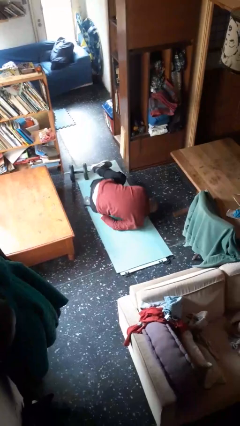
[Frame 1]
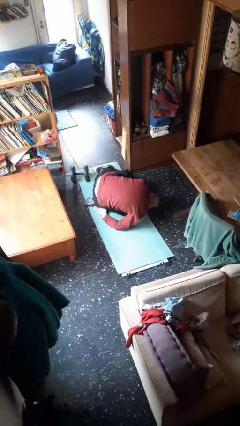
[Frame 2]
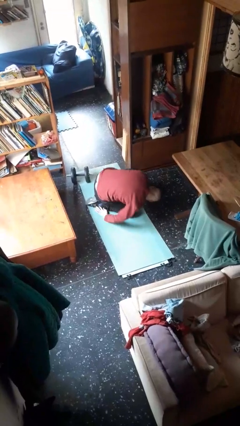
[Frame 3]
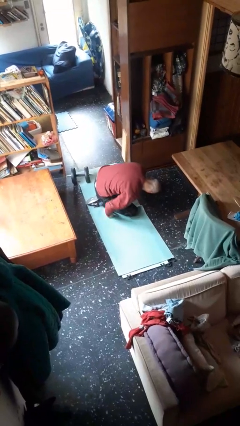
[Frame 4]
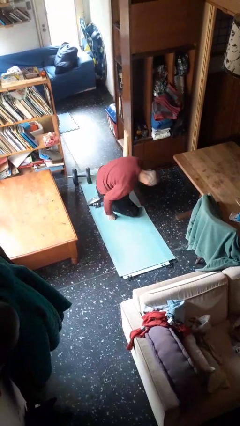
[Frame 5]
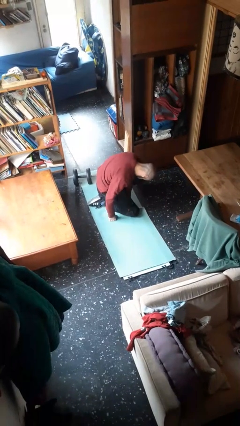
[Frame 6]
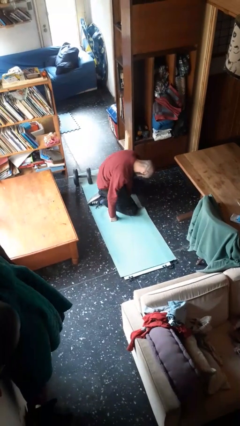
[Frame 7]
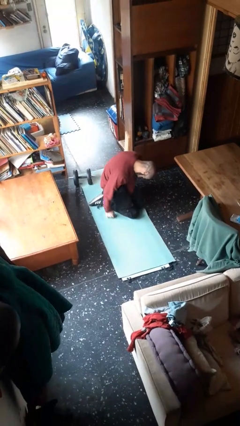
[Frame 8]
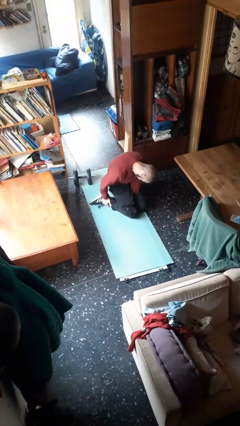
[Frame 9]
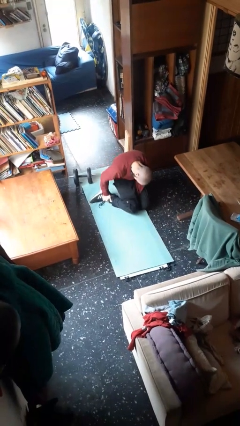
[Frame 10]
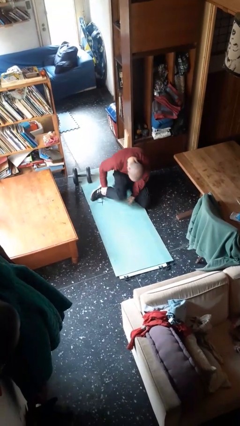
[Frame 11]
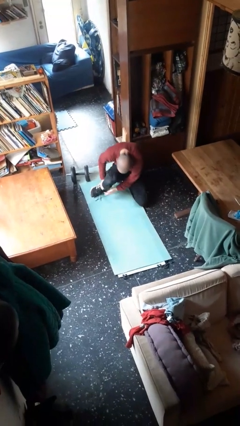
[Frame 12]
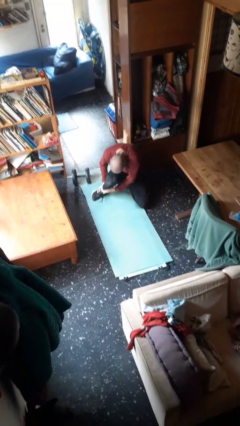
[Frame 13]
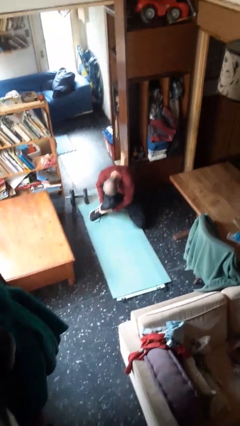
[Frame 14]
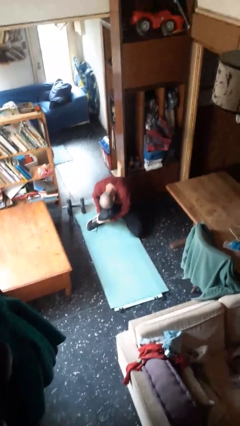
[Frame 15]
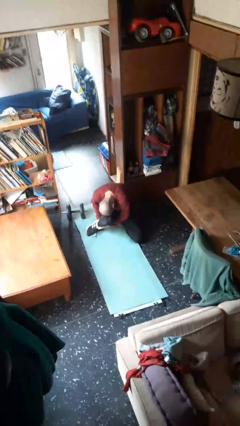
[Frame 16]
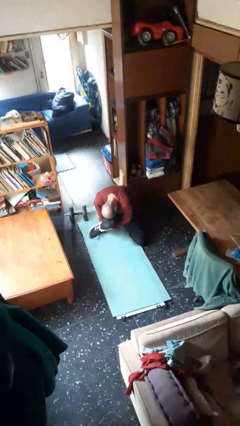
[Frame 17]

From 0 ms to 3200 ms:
person lies down on floor

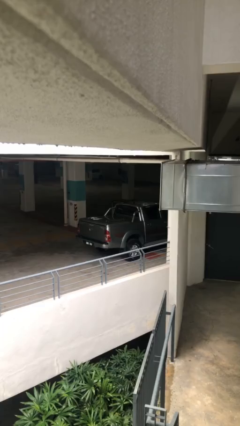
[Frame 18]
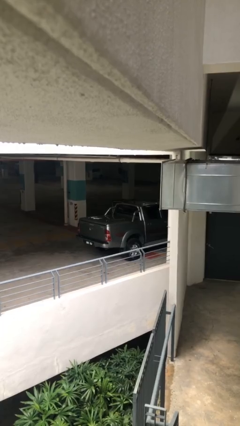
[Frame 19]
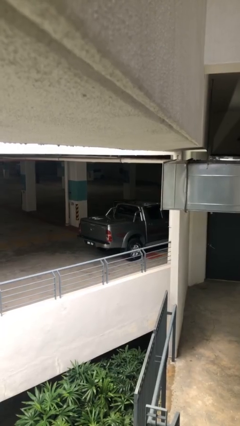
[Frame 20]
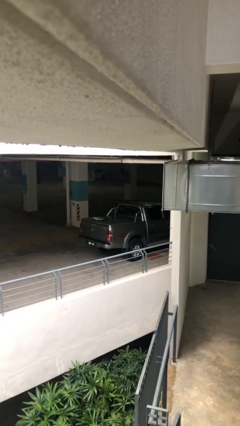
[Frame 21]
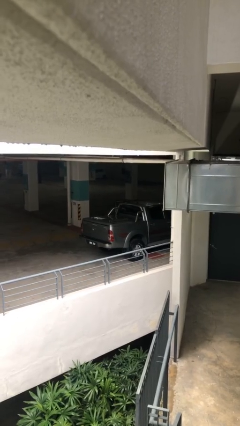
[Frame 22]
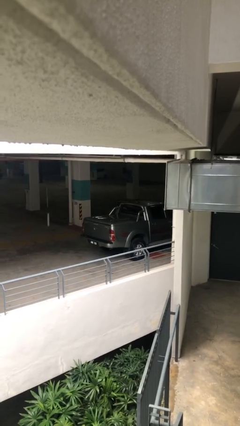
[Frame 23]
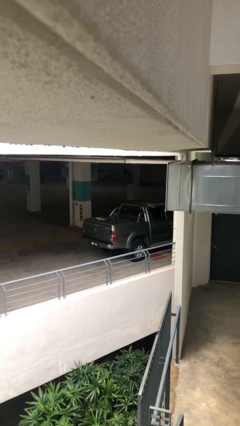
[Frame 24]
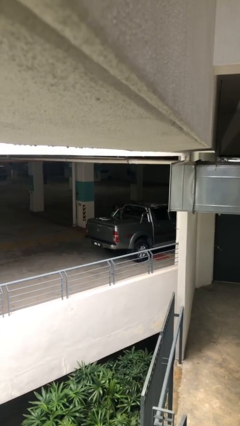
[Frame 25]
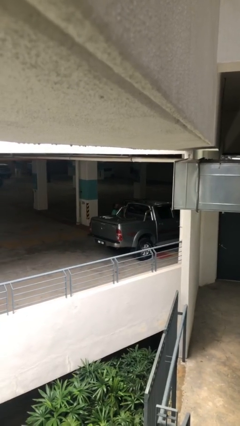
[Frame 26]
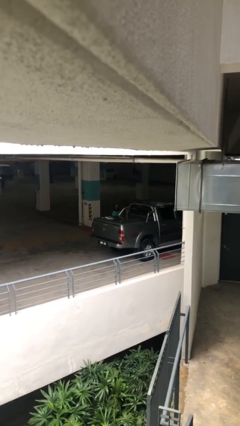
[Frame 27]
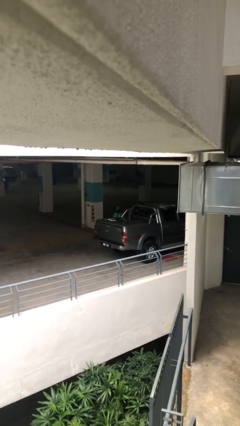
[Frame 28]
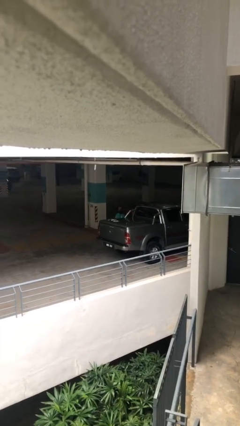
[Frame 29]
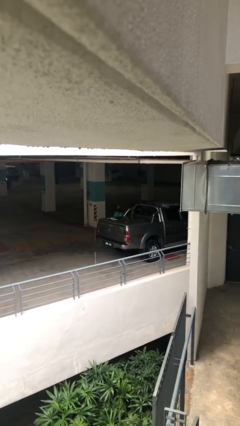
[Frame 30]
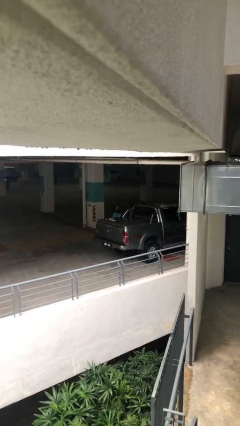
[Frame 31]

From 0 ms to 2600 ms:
person exits car

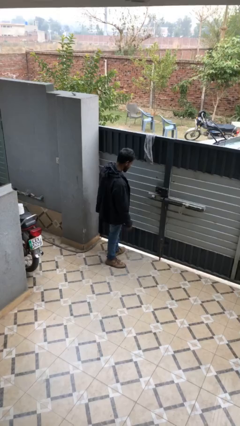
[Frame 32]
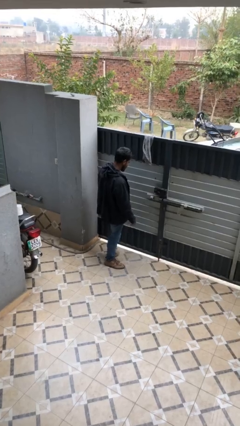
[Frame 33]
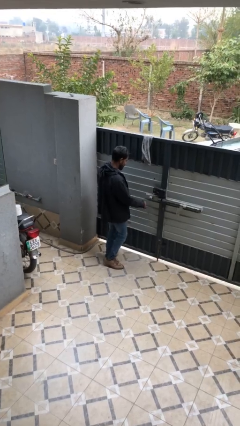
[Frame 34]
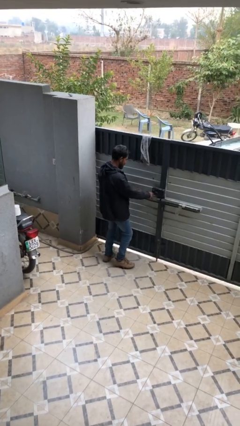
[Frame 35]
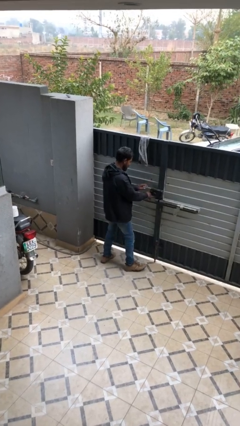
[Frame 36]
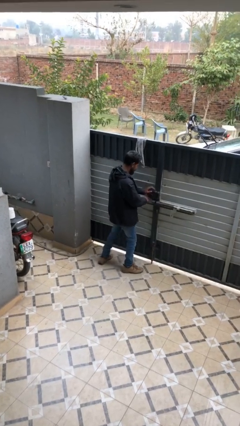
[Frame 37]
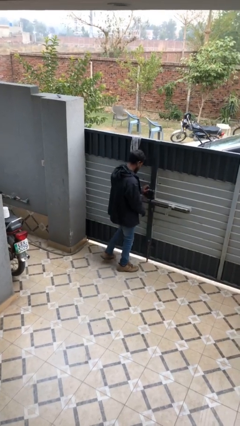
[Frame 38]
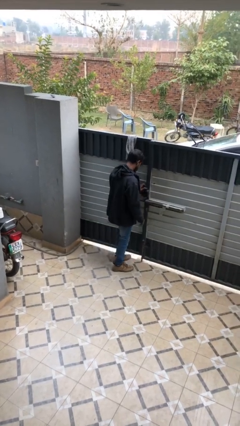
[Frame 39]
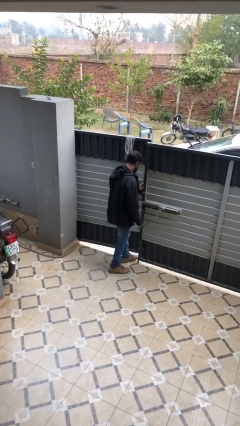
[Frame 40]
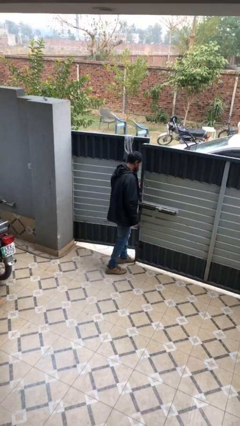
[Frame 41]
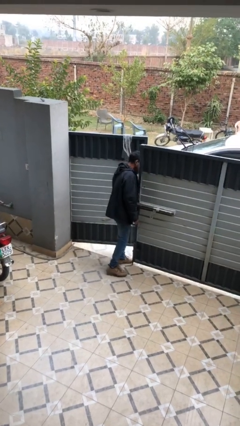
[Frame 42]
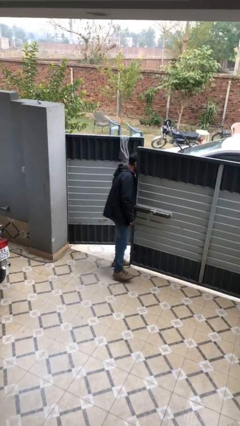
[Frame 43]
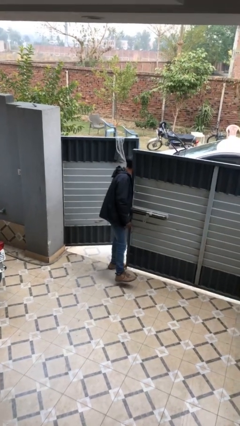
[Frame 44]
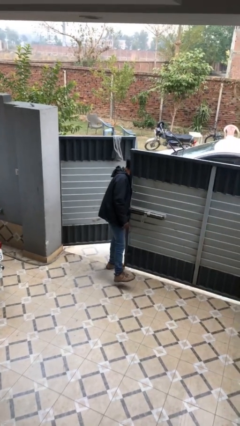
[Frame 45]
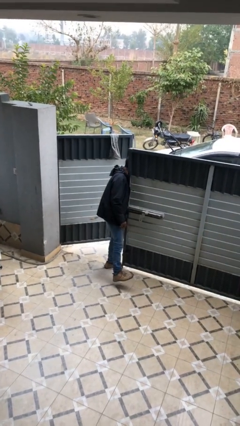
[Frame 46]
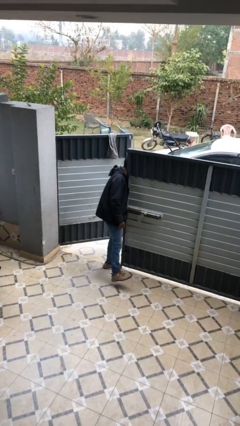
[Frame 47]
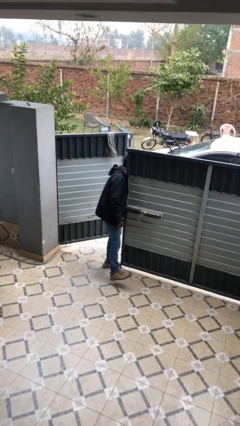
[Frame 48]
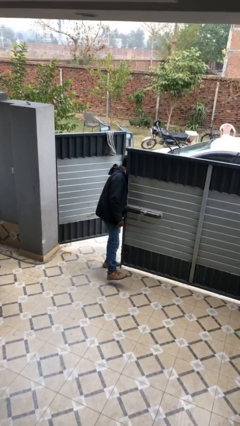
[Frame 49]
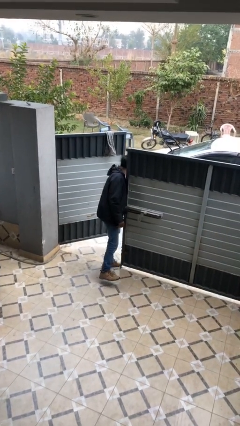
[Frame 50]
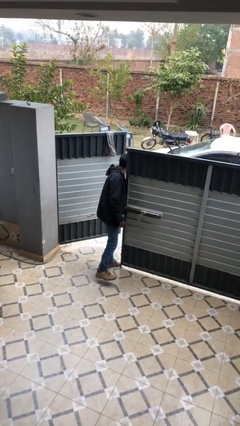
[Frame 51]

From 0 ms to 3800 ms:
person opens facility door

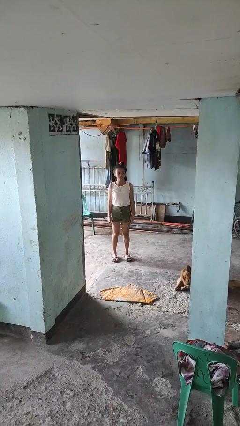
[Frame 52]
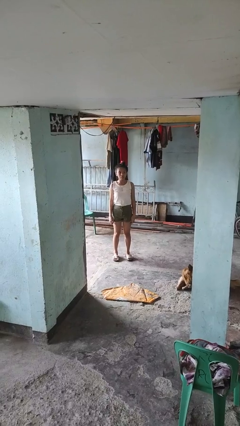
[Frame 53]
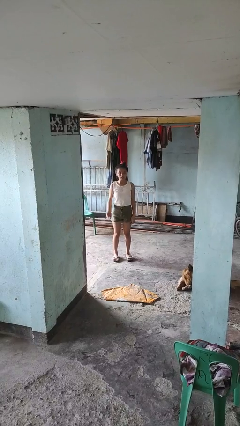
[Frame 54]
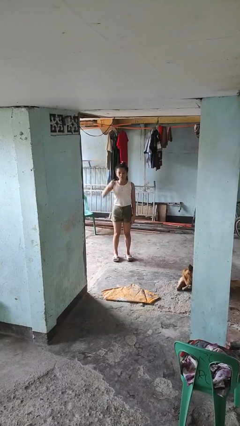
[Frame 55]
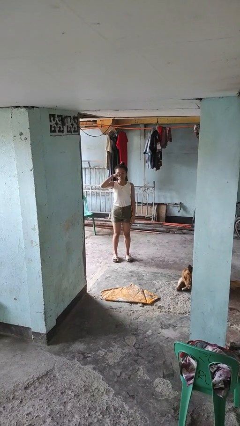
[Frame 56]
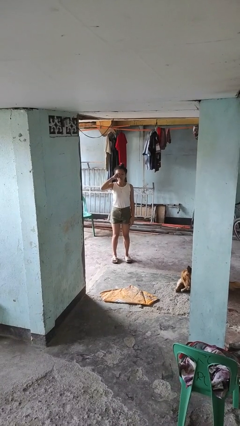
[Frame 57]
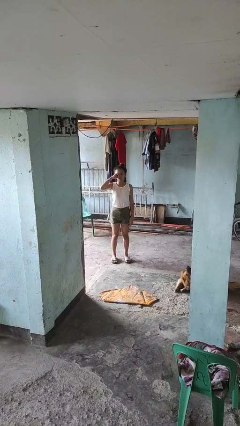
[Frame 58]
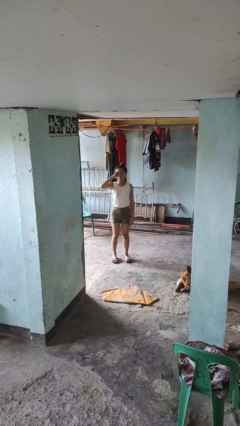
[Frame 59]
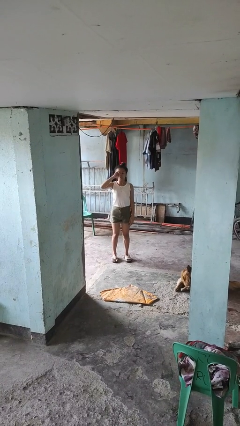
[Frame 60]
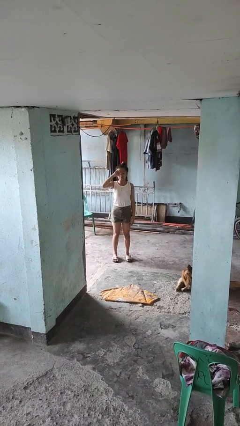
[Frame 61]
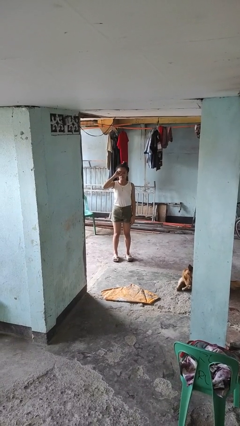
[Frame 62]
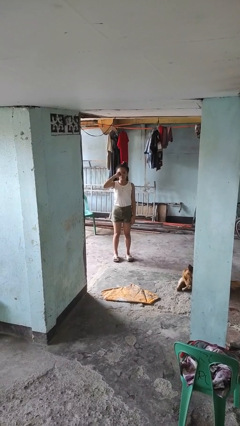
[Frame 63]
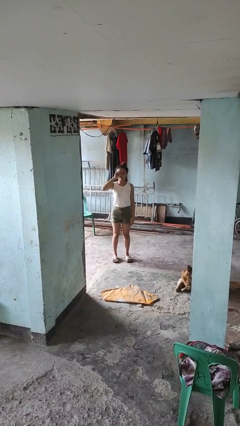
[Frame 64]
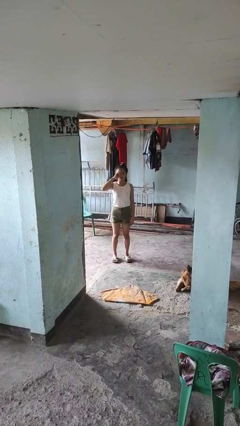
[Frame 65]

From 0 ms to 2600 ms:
person rubs eyes

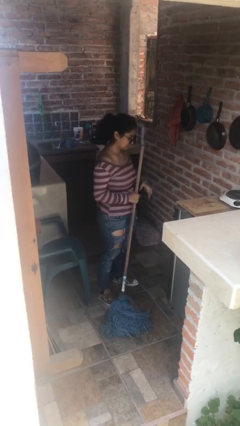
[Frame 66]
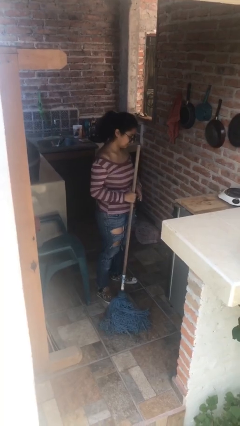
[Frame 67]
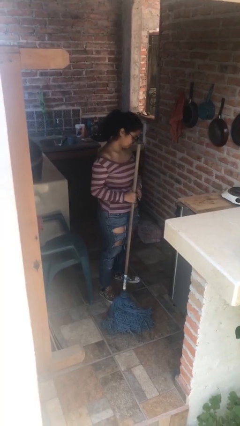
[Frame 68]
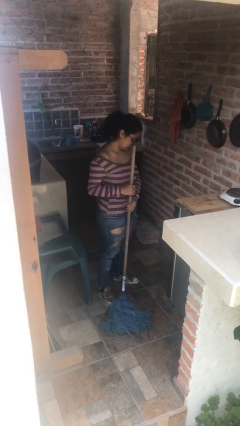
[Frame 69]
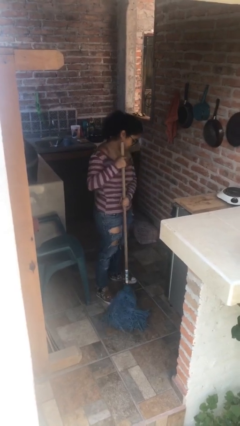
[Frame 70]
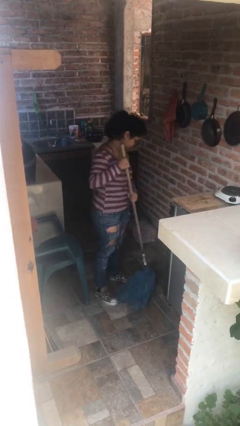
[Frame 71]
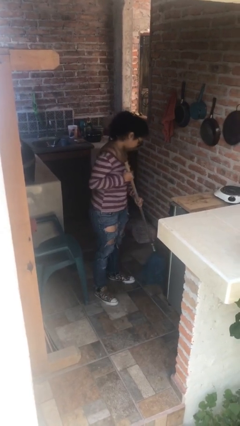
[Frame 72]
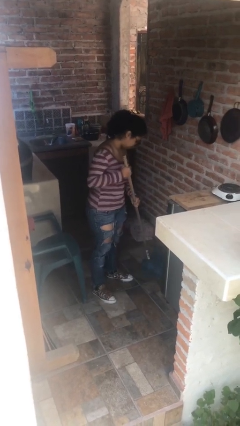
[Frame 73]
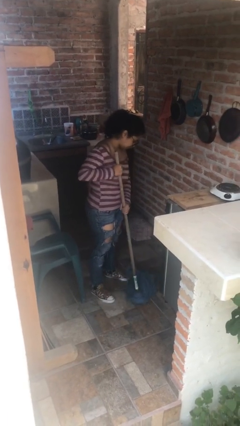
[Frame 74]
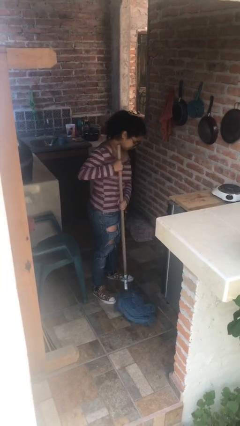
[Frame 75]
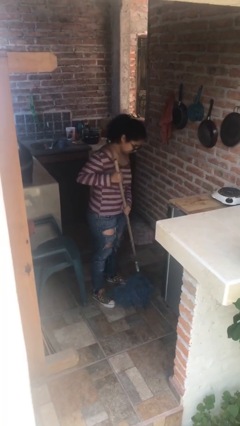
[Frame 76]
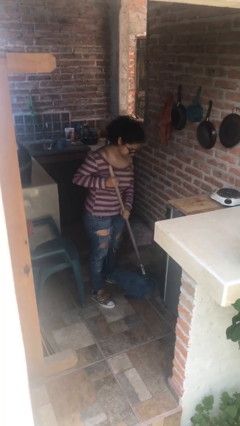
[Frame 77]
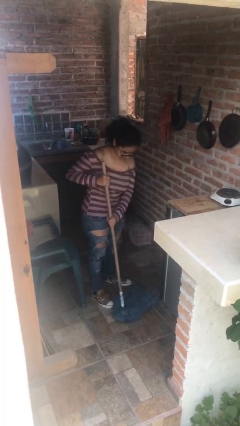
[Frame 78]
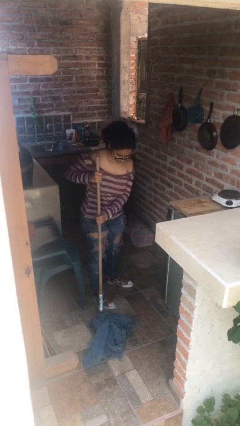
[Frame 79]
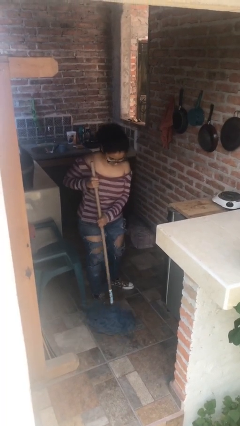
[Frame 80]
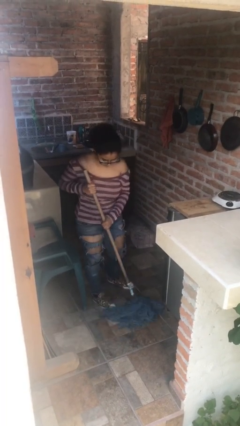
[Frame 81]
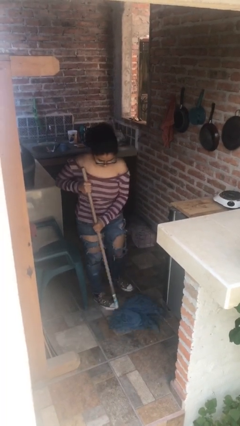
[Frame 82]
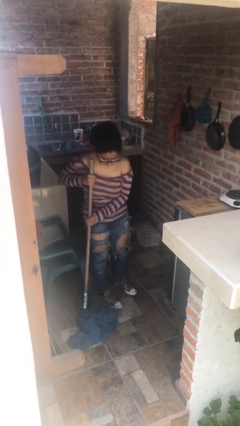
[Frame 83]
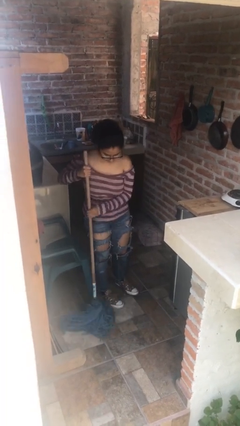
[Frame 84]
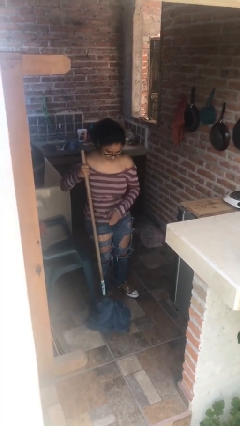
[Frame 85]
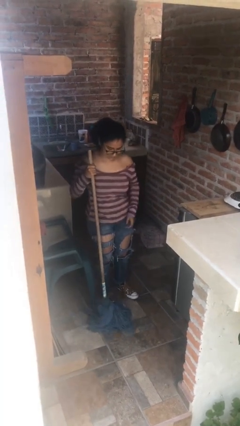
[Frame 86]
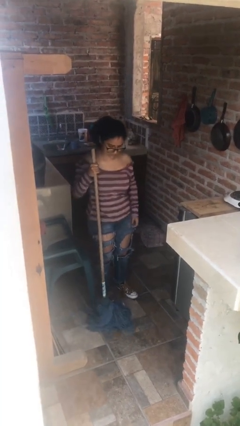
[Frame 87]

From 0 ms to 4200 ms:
person mops

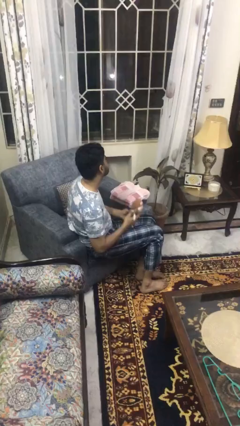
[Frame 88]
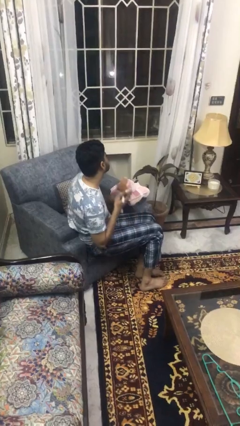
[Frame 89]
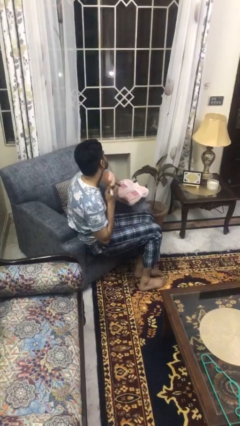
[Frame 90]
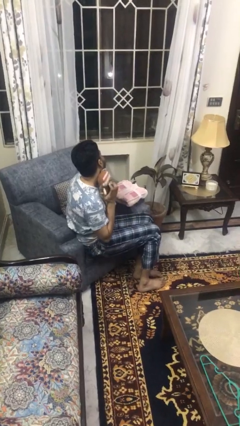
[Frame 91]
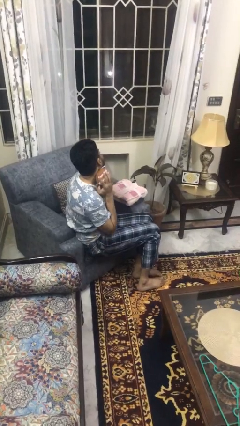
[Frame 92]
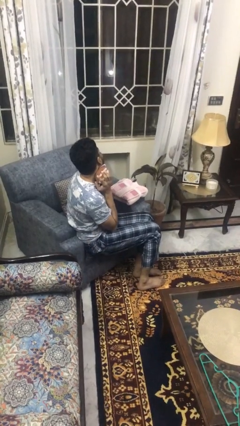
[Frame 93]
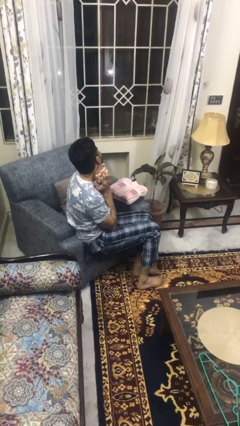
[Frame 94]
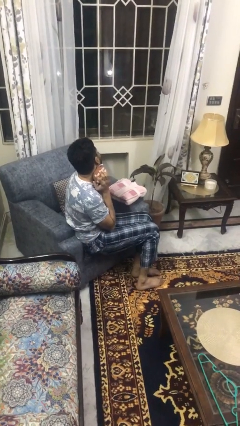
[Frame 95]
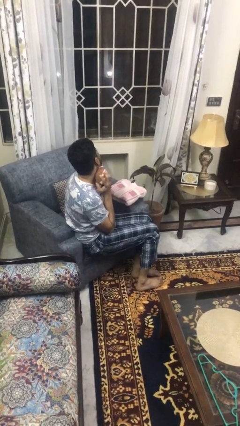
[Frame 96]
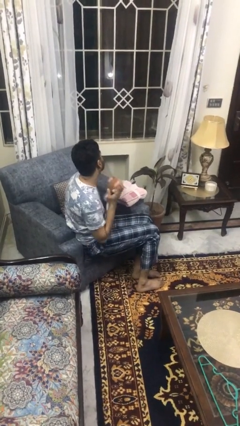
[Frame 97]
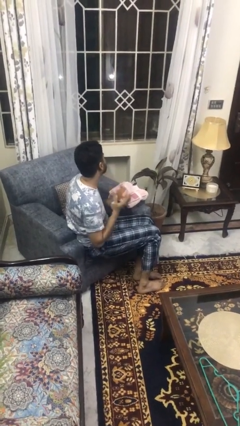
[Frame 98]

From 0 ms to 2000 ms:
person hugs stuffed animal
